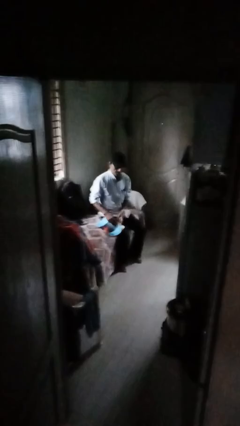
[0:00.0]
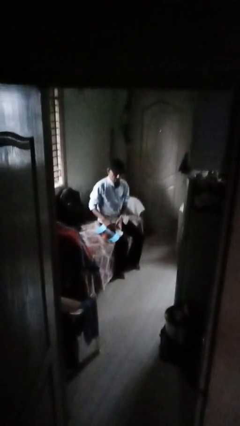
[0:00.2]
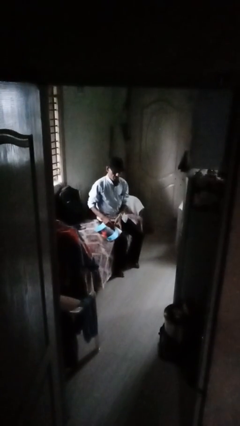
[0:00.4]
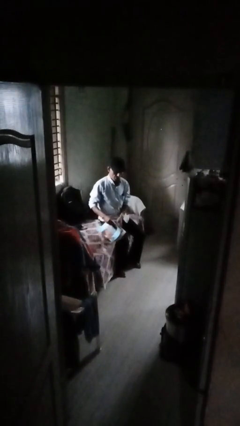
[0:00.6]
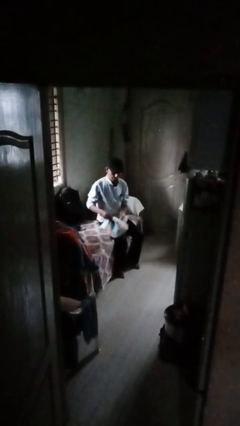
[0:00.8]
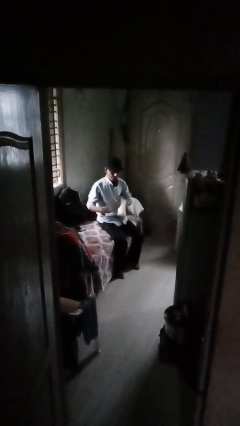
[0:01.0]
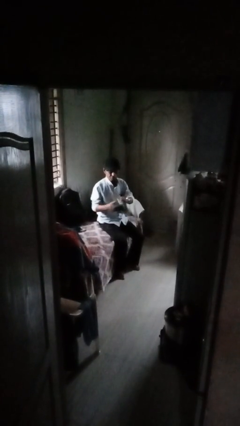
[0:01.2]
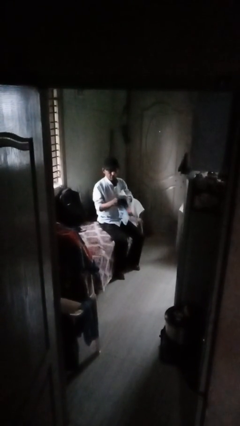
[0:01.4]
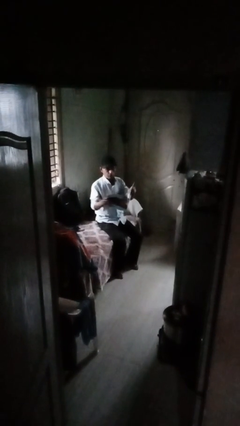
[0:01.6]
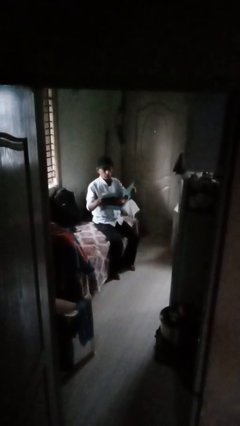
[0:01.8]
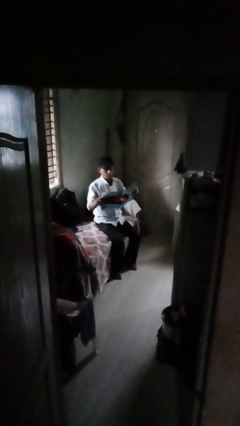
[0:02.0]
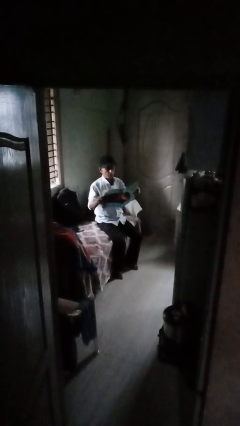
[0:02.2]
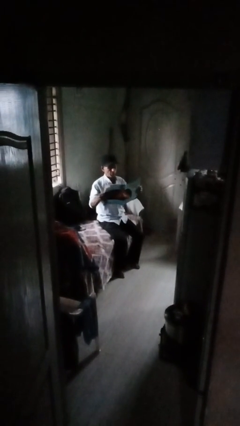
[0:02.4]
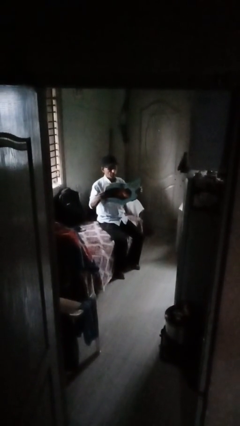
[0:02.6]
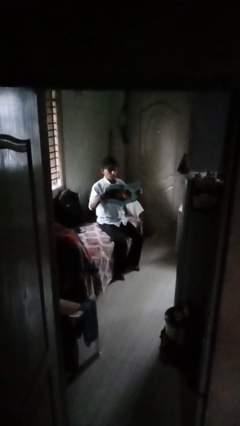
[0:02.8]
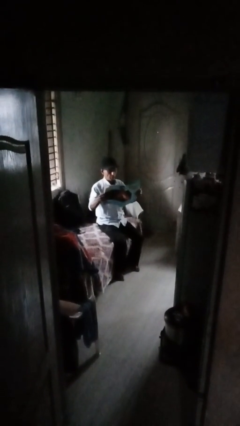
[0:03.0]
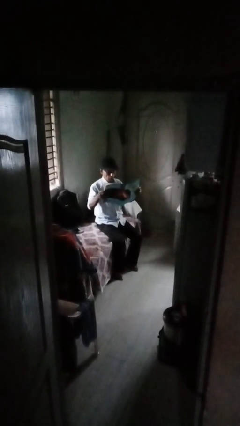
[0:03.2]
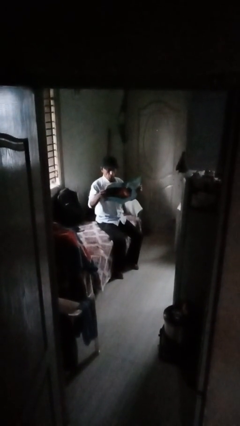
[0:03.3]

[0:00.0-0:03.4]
person reads magazine

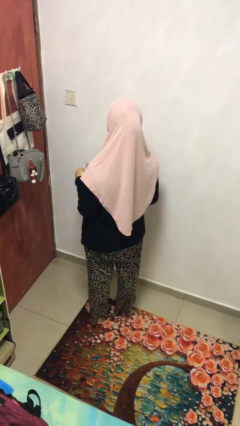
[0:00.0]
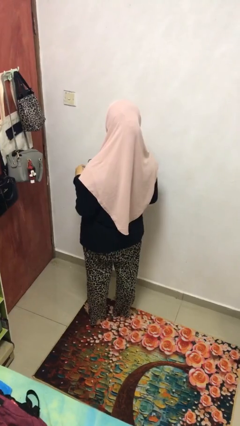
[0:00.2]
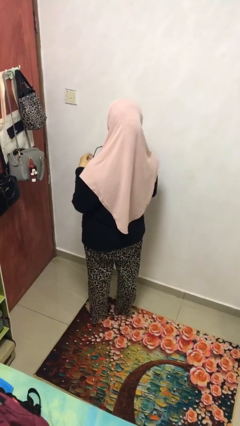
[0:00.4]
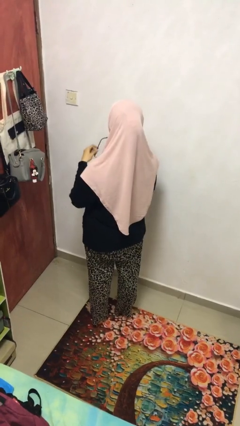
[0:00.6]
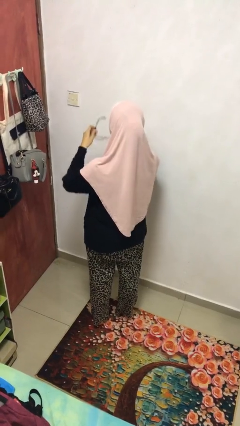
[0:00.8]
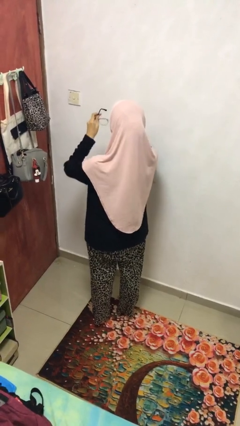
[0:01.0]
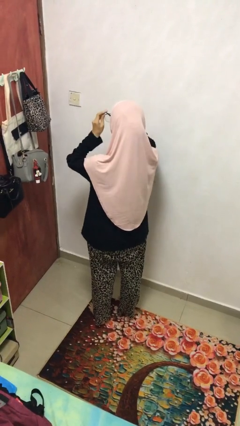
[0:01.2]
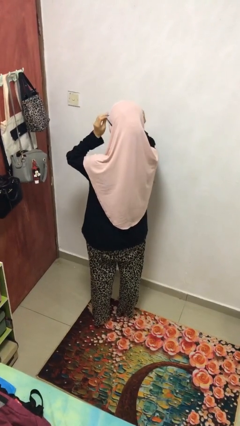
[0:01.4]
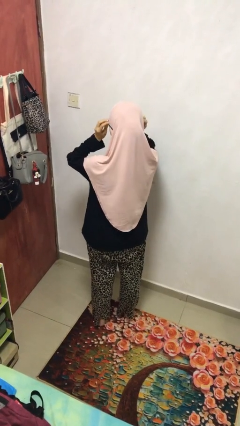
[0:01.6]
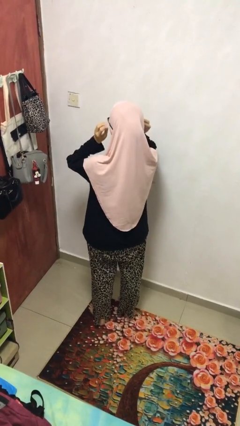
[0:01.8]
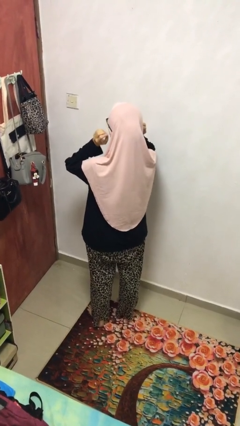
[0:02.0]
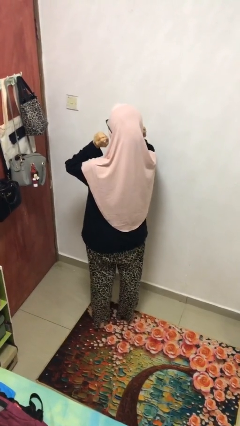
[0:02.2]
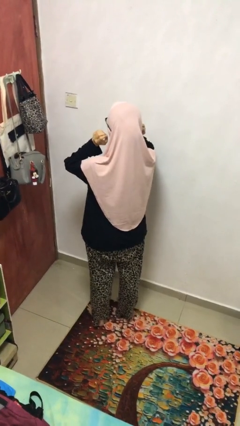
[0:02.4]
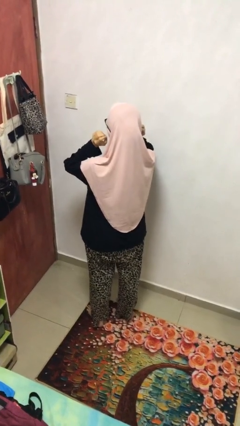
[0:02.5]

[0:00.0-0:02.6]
person puts on glasses

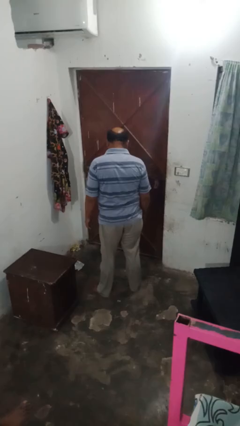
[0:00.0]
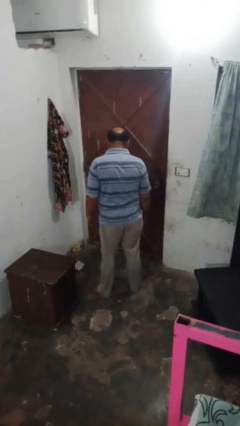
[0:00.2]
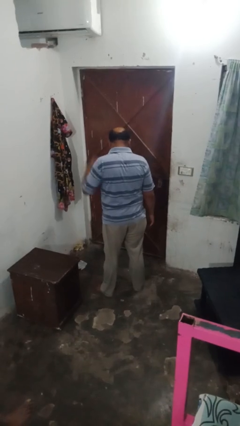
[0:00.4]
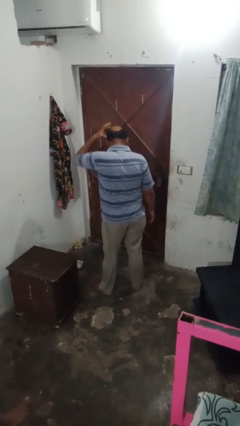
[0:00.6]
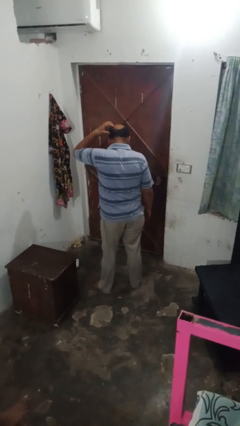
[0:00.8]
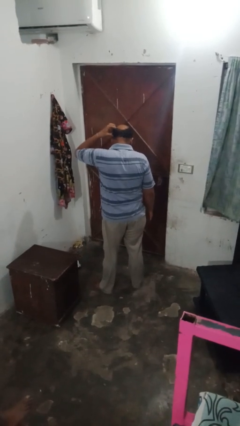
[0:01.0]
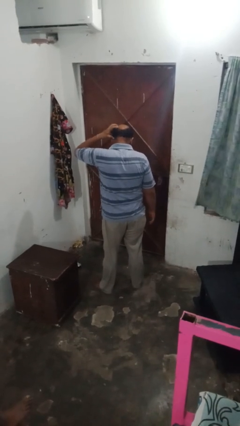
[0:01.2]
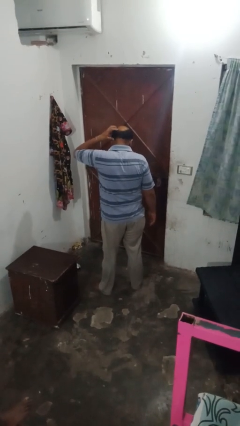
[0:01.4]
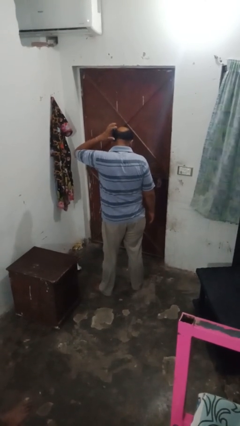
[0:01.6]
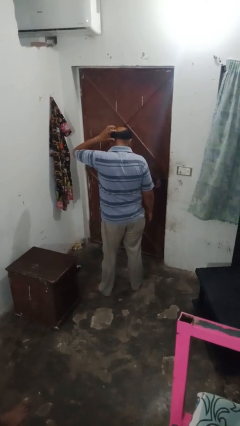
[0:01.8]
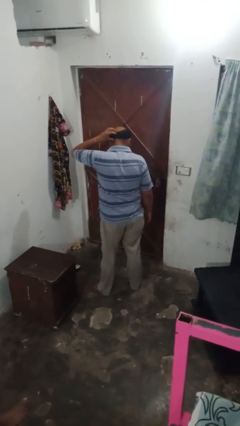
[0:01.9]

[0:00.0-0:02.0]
person strokes hair

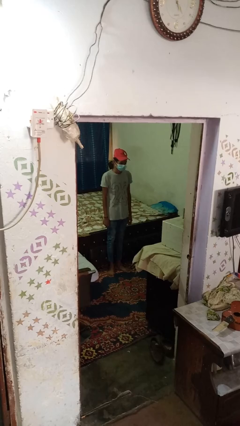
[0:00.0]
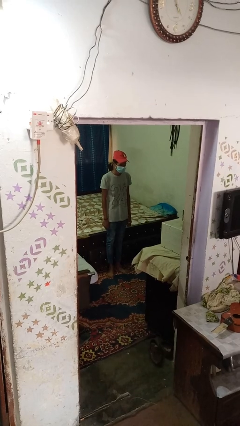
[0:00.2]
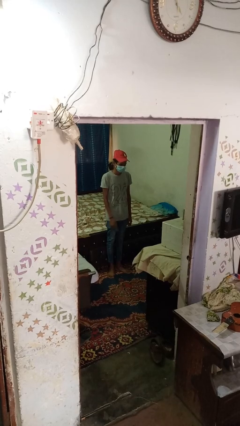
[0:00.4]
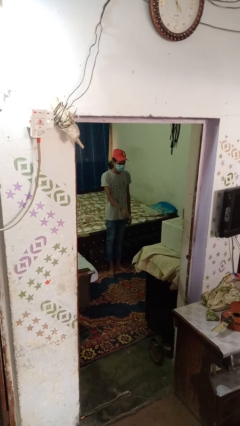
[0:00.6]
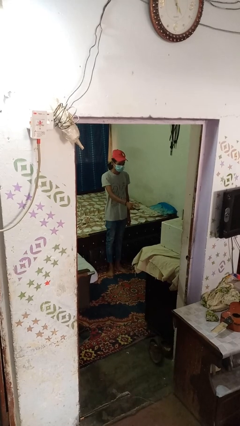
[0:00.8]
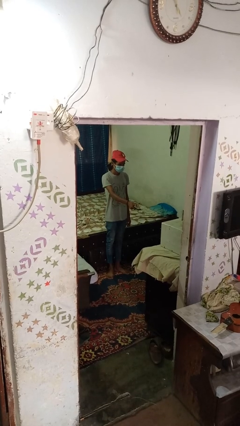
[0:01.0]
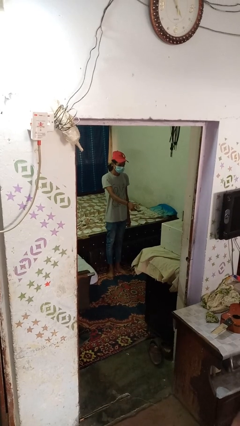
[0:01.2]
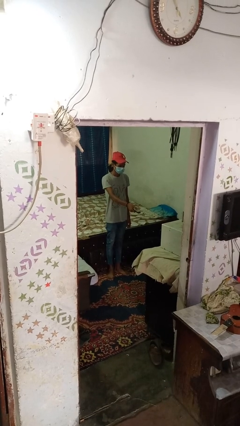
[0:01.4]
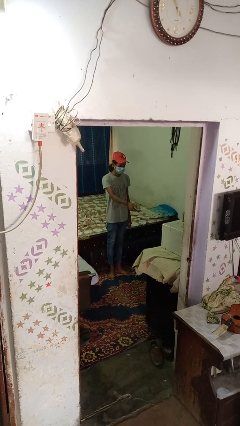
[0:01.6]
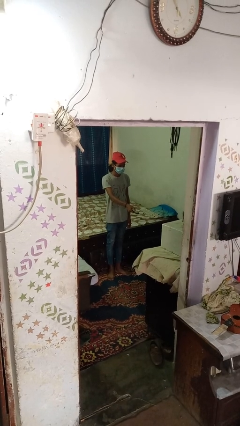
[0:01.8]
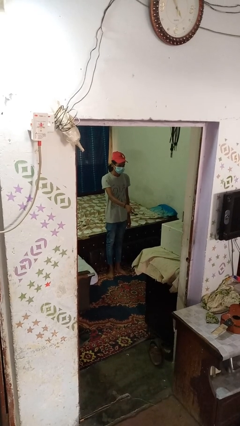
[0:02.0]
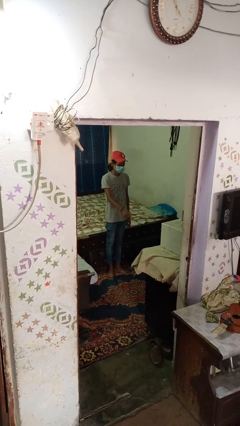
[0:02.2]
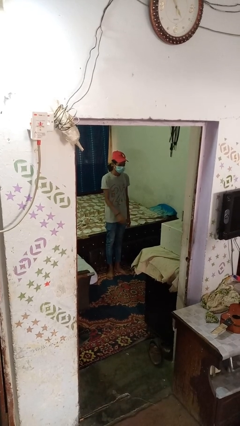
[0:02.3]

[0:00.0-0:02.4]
person uses television remote

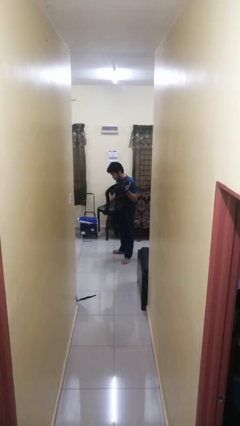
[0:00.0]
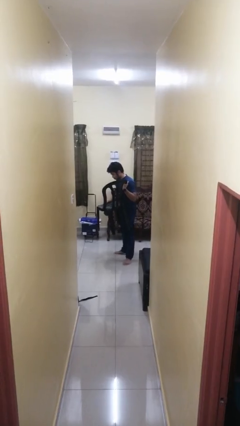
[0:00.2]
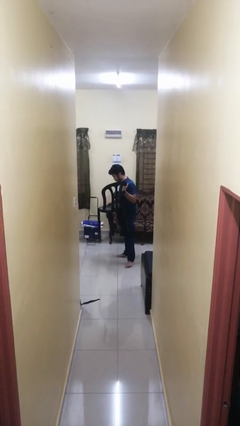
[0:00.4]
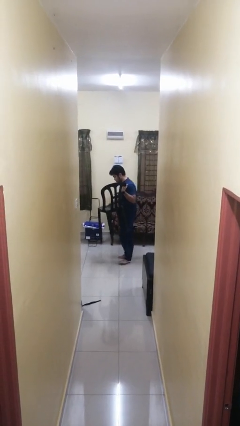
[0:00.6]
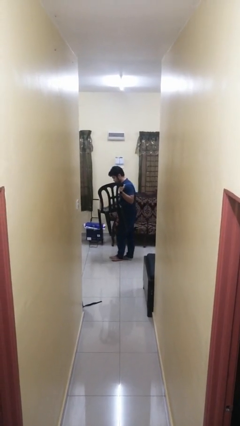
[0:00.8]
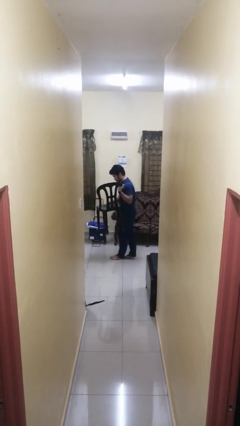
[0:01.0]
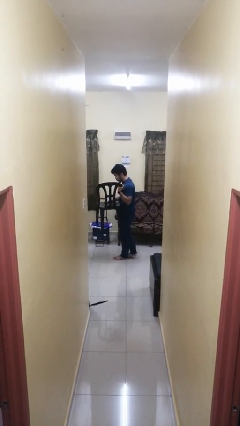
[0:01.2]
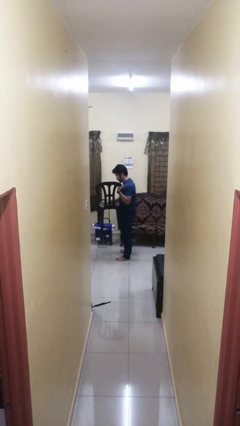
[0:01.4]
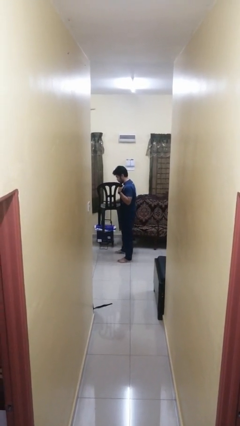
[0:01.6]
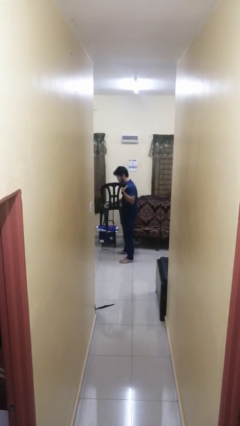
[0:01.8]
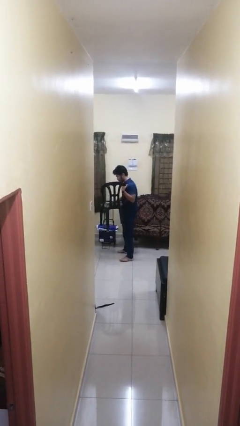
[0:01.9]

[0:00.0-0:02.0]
person carries furniture

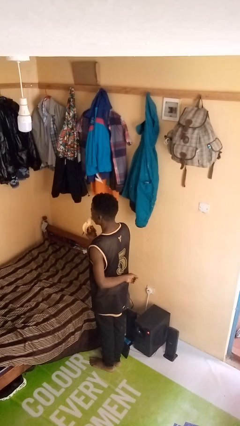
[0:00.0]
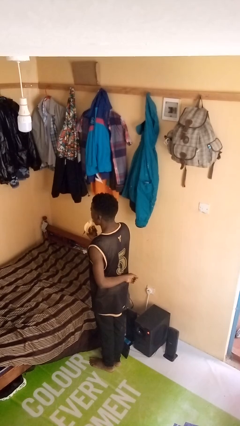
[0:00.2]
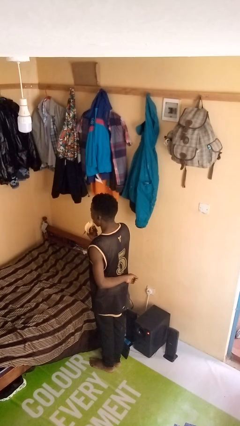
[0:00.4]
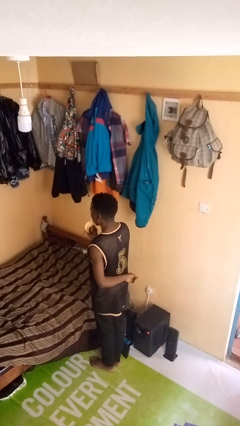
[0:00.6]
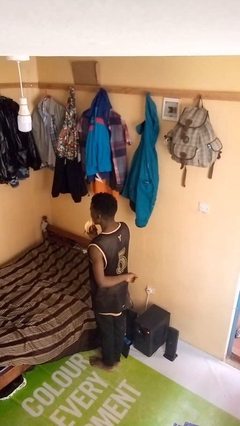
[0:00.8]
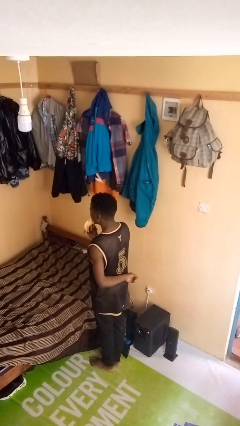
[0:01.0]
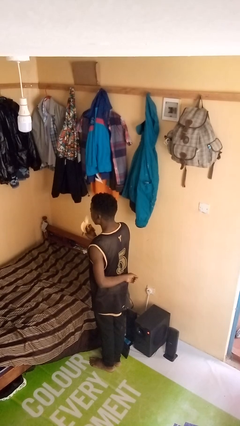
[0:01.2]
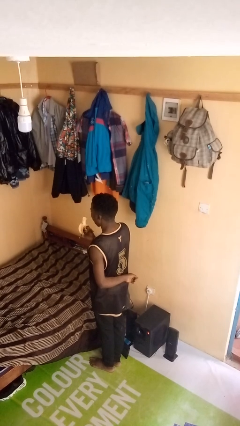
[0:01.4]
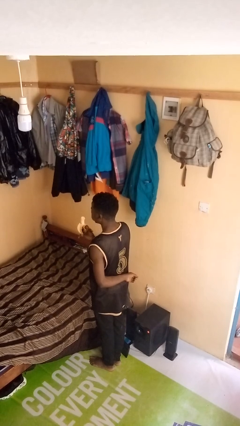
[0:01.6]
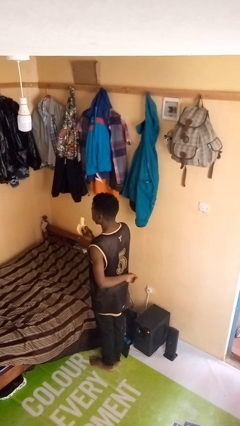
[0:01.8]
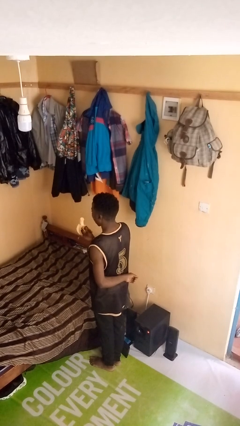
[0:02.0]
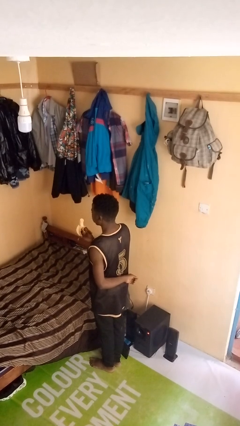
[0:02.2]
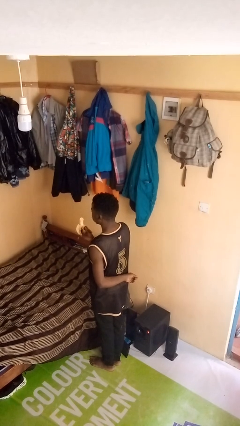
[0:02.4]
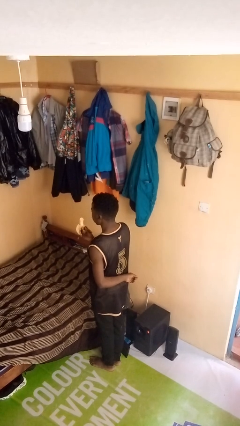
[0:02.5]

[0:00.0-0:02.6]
person eats banana

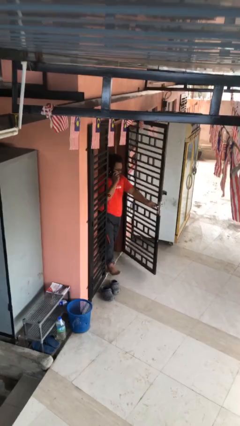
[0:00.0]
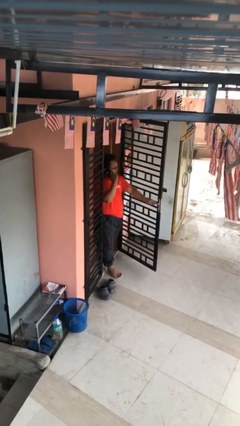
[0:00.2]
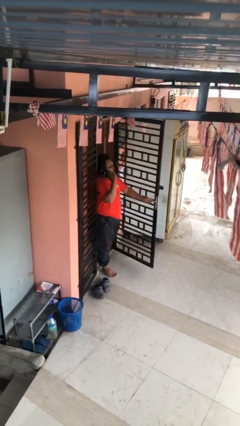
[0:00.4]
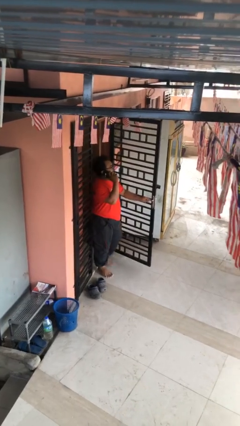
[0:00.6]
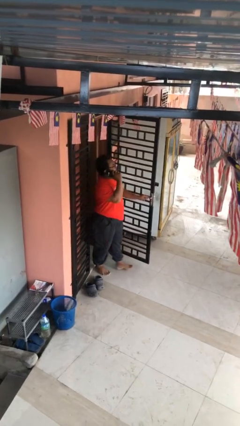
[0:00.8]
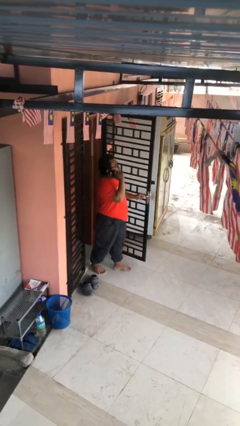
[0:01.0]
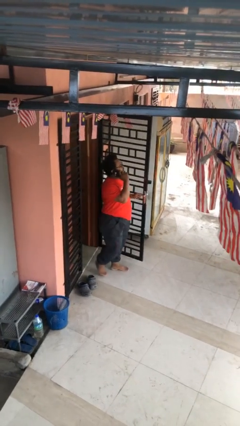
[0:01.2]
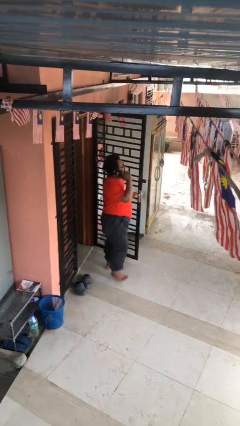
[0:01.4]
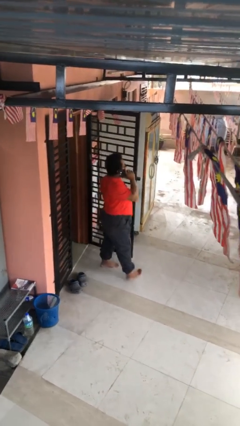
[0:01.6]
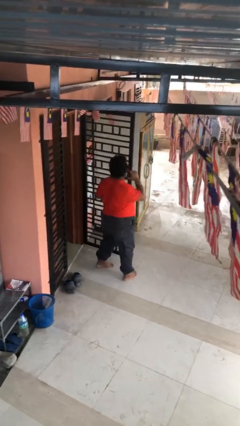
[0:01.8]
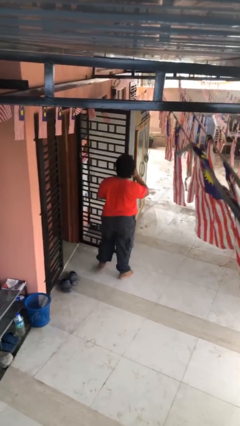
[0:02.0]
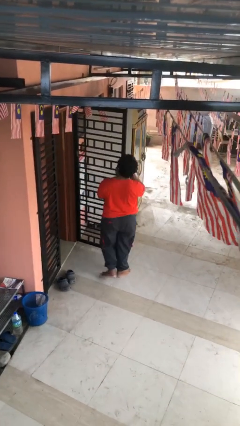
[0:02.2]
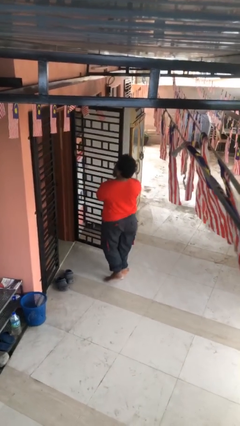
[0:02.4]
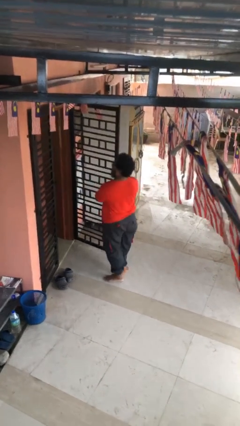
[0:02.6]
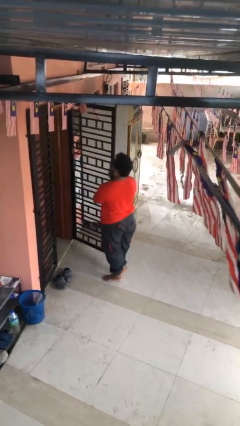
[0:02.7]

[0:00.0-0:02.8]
person enters scene through structure
